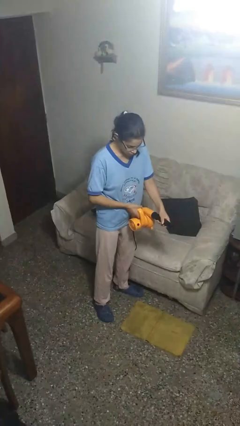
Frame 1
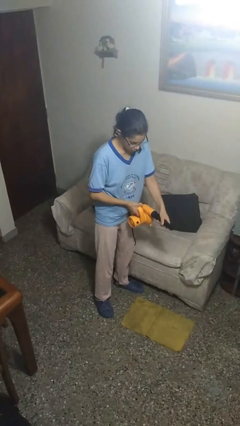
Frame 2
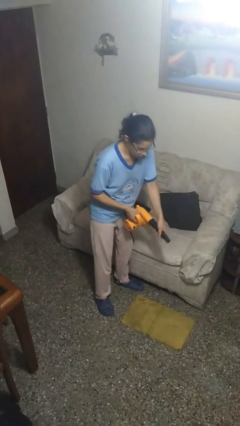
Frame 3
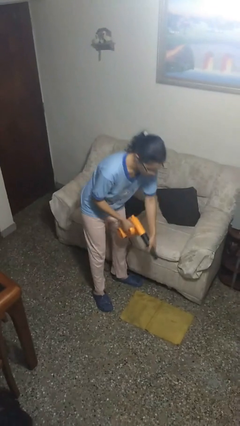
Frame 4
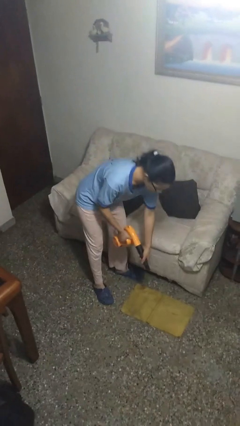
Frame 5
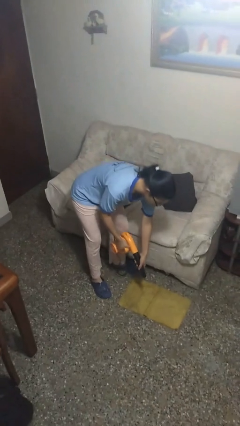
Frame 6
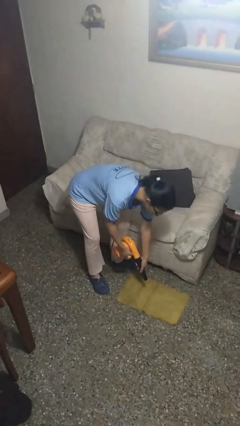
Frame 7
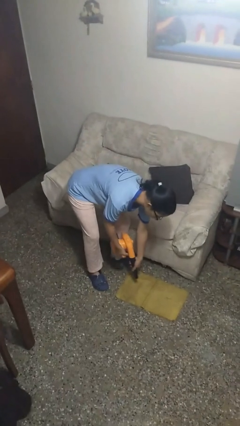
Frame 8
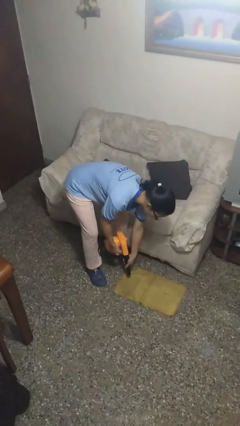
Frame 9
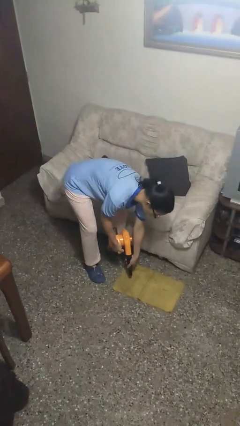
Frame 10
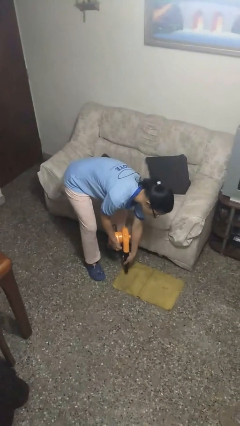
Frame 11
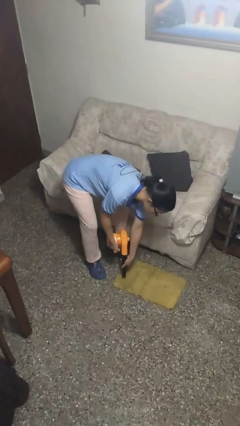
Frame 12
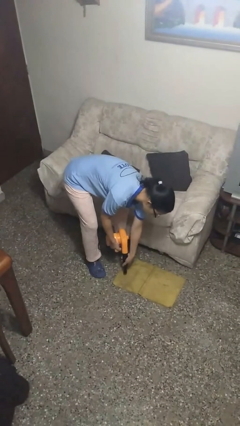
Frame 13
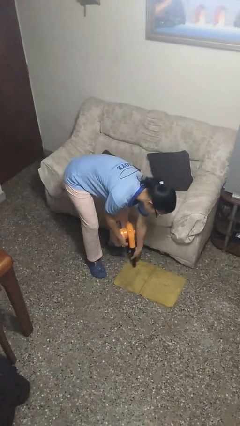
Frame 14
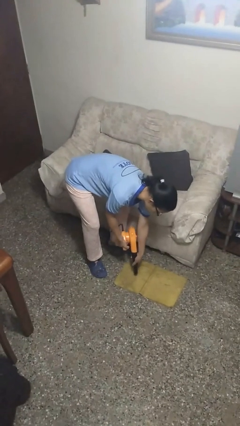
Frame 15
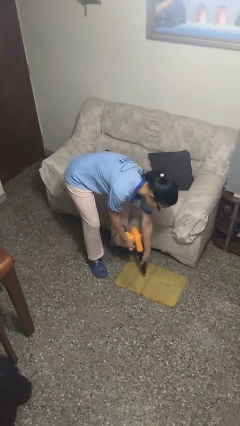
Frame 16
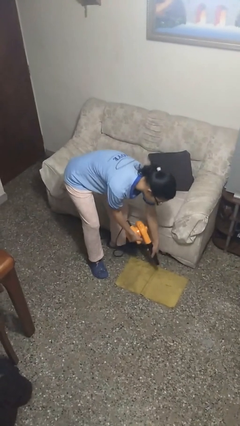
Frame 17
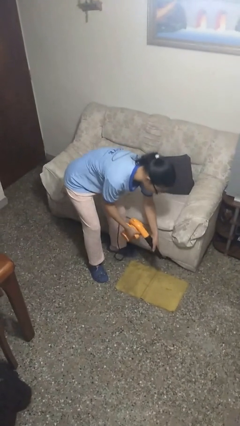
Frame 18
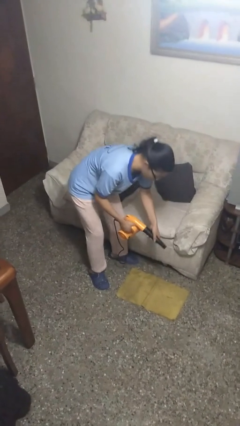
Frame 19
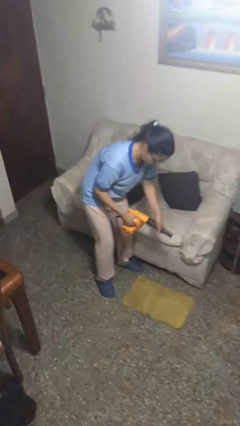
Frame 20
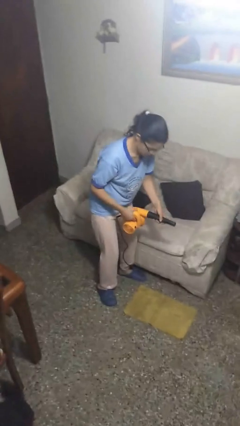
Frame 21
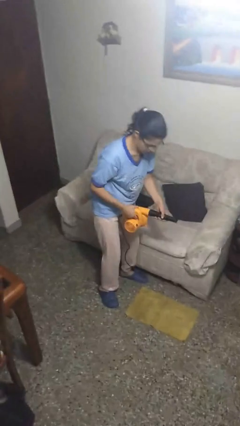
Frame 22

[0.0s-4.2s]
person vacuums carpet

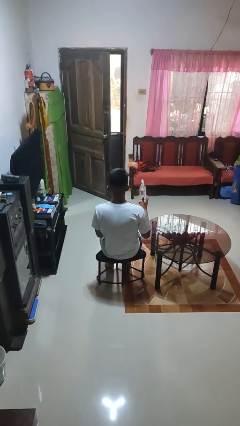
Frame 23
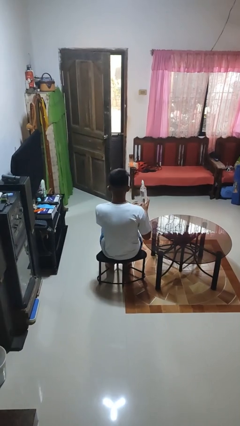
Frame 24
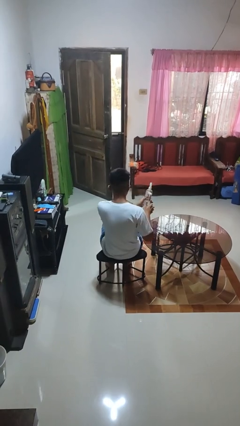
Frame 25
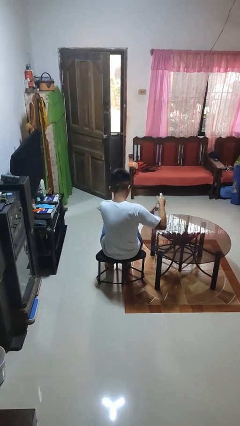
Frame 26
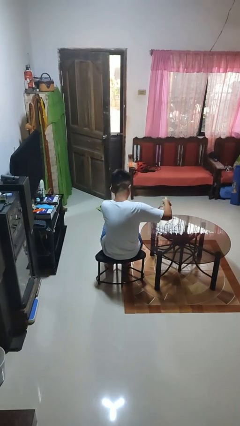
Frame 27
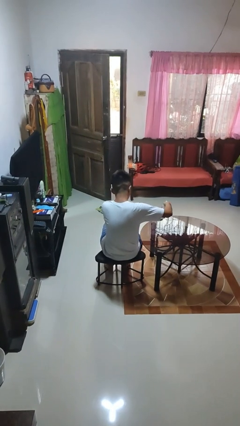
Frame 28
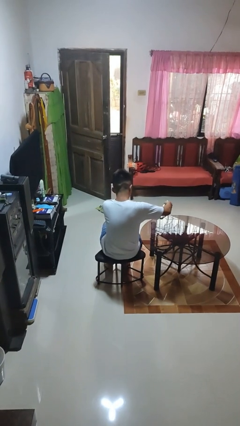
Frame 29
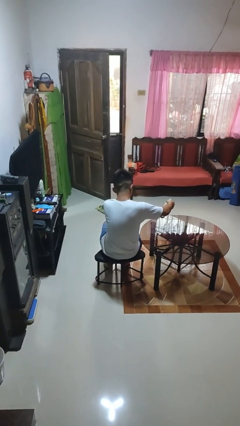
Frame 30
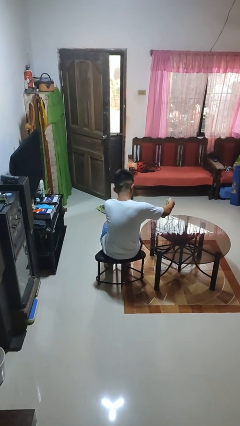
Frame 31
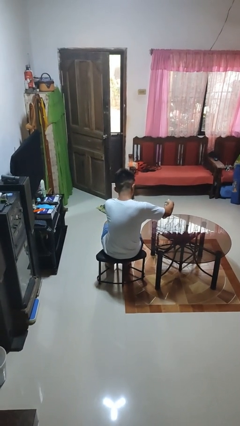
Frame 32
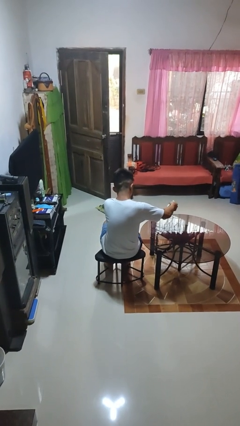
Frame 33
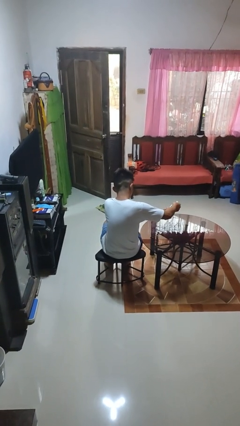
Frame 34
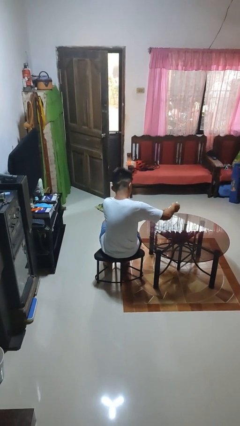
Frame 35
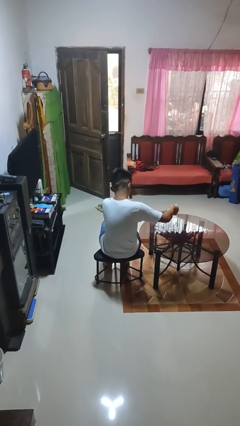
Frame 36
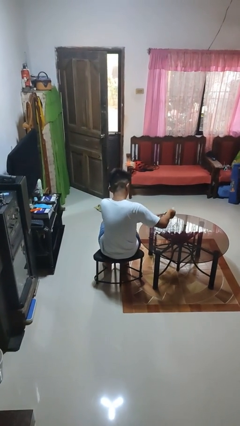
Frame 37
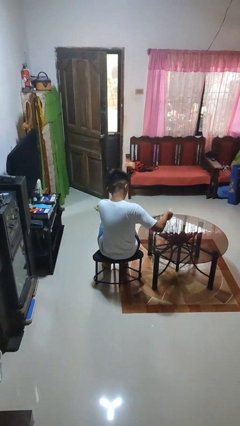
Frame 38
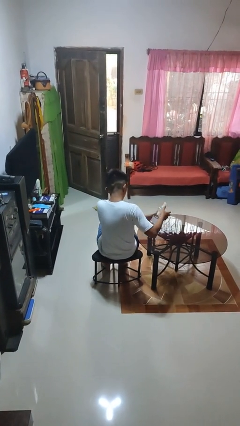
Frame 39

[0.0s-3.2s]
person sprays from bottle

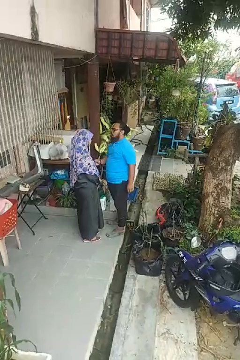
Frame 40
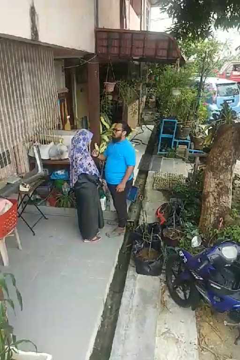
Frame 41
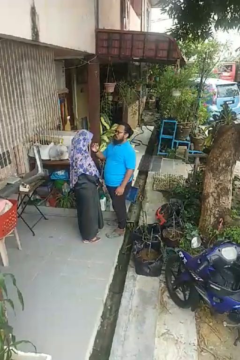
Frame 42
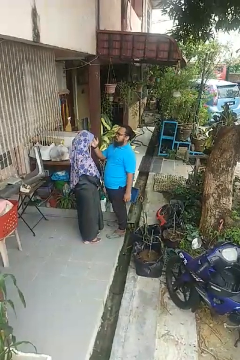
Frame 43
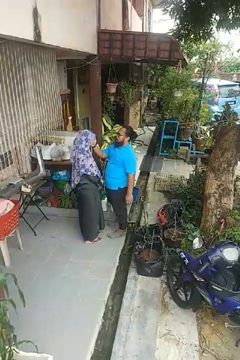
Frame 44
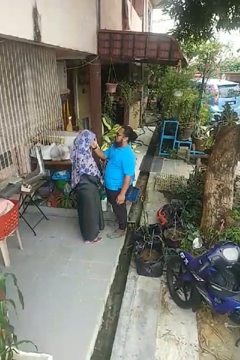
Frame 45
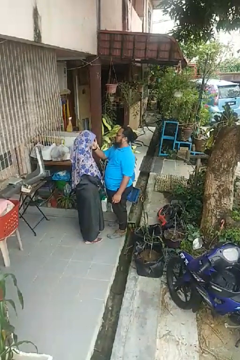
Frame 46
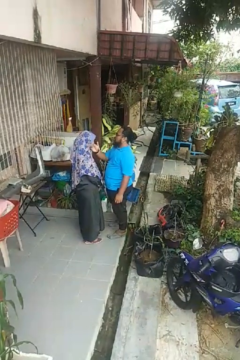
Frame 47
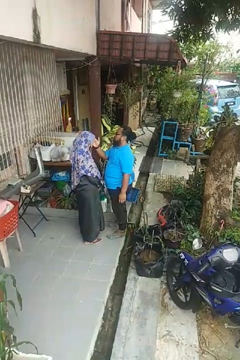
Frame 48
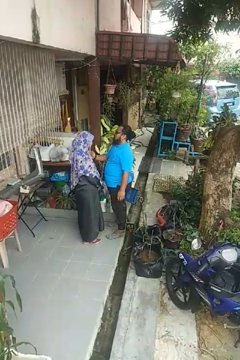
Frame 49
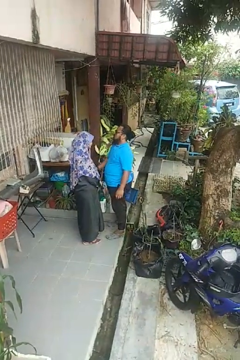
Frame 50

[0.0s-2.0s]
person touches face of person

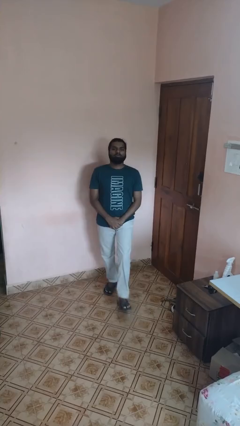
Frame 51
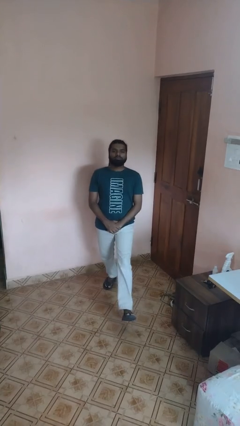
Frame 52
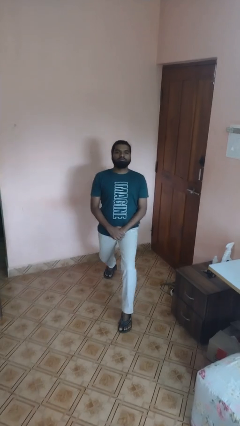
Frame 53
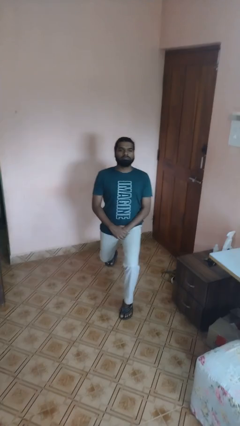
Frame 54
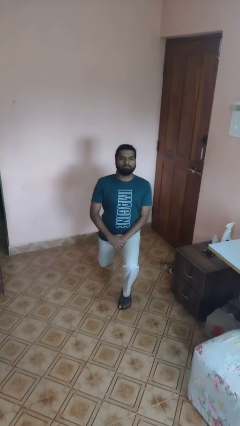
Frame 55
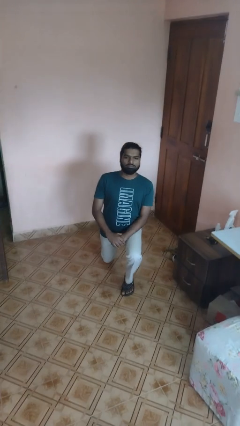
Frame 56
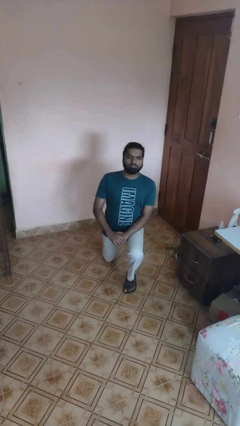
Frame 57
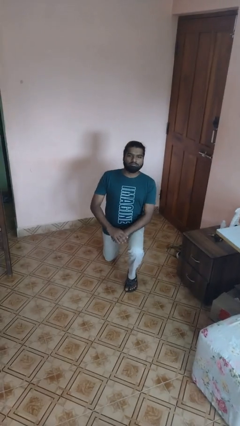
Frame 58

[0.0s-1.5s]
person kneels

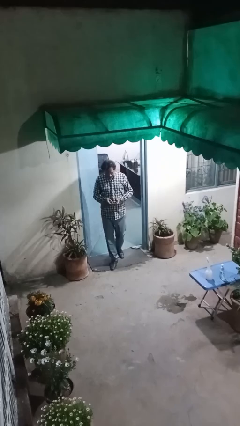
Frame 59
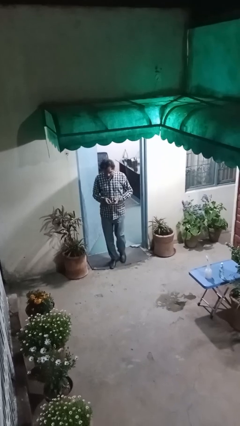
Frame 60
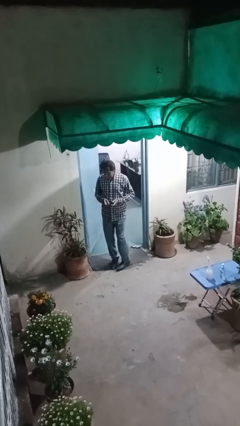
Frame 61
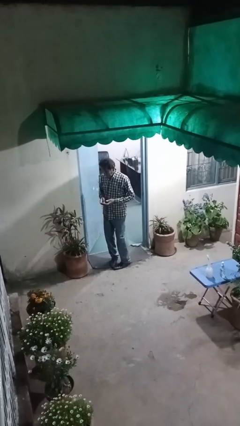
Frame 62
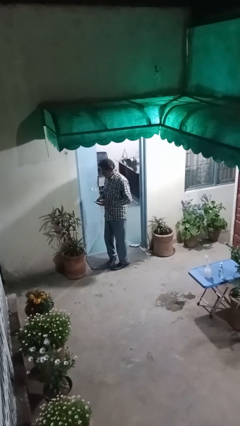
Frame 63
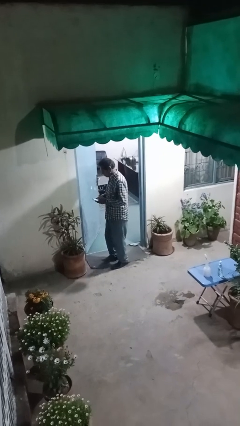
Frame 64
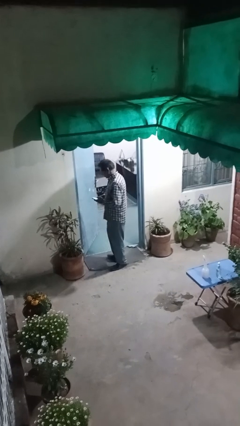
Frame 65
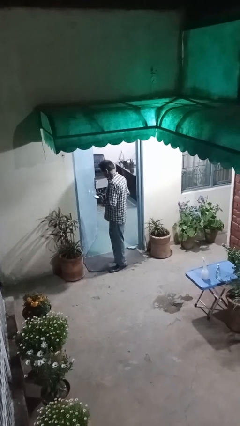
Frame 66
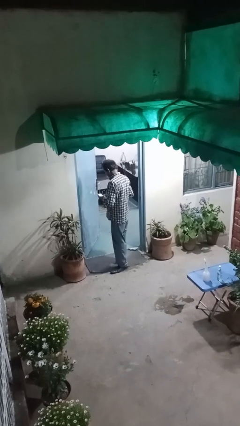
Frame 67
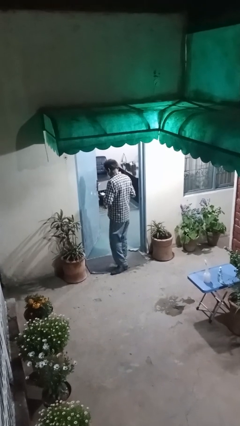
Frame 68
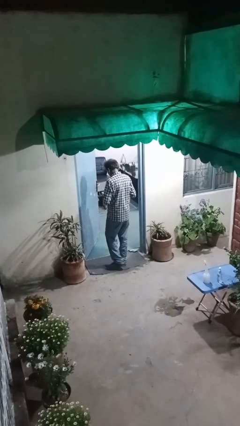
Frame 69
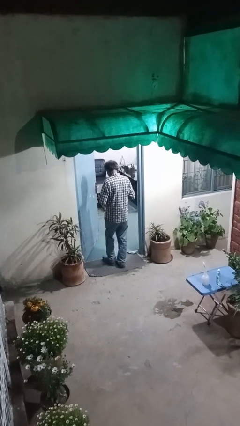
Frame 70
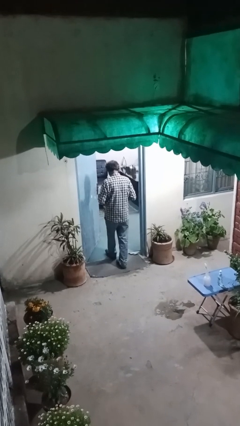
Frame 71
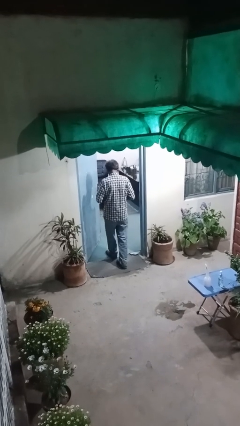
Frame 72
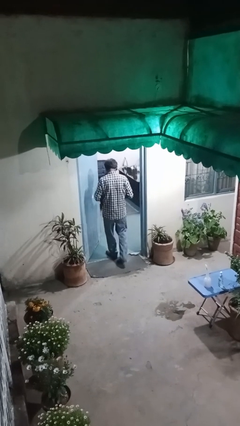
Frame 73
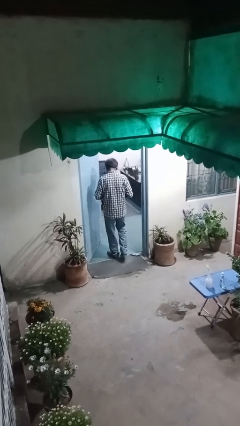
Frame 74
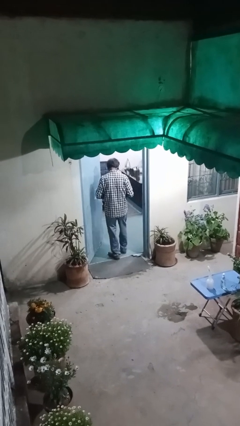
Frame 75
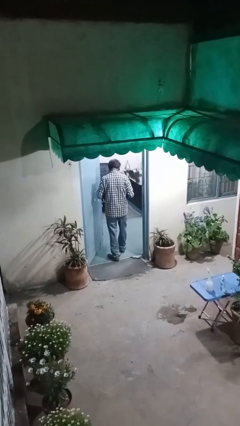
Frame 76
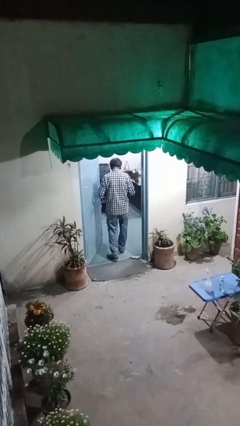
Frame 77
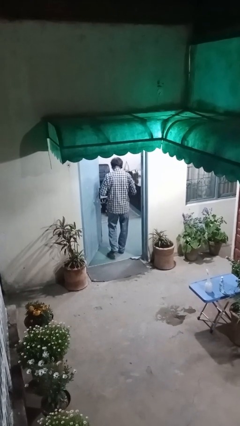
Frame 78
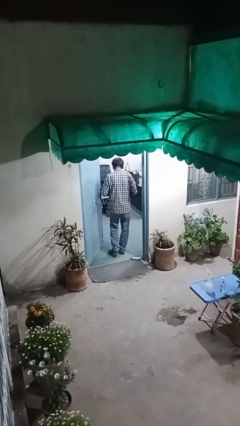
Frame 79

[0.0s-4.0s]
person exits scene through structure

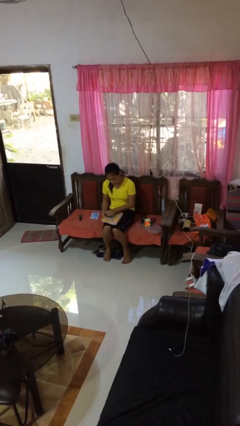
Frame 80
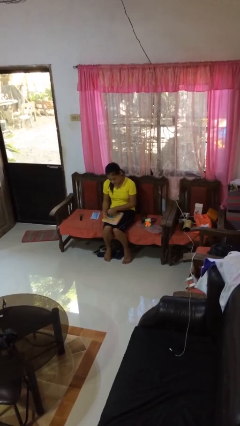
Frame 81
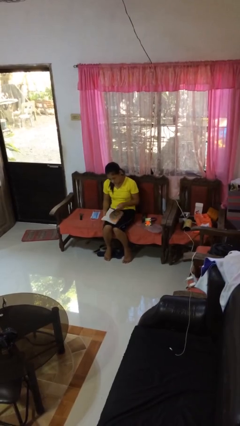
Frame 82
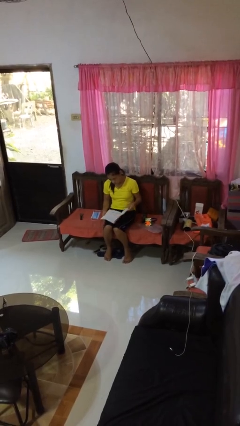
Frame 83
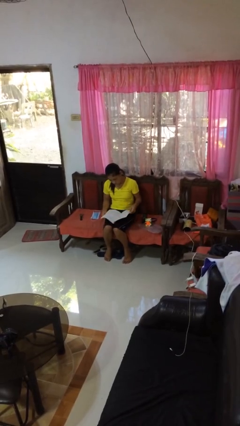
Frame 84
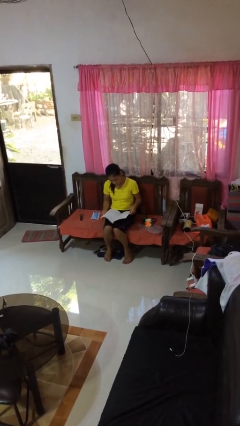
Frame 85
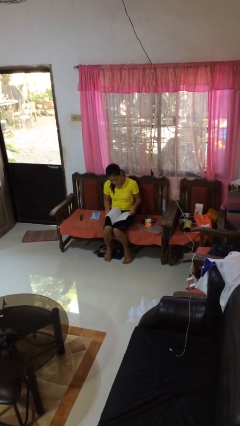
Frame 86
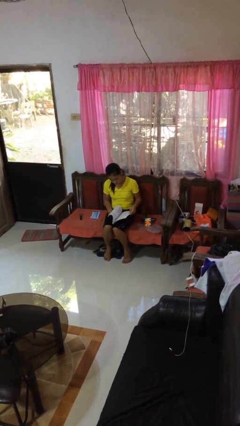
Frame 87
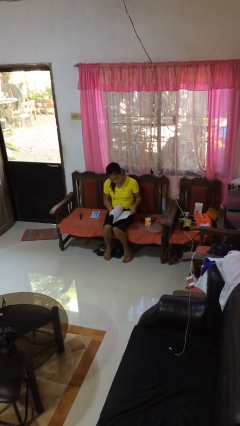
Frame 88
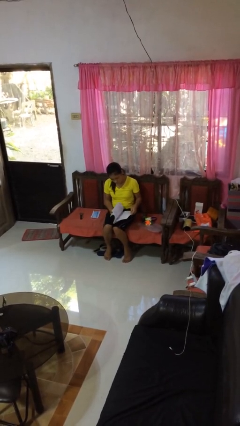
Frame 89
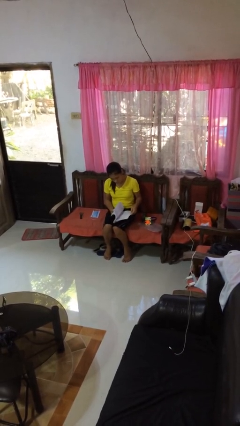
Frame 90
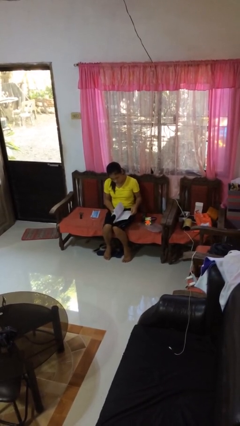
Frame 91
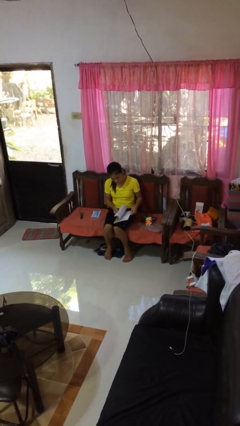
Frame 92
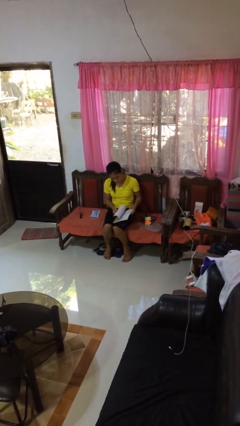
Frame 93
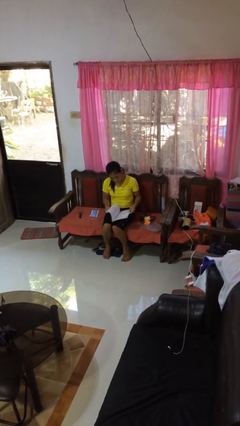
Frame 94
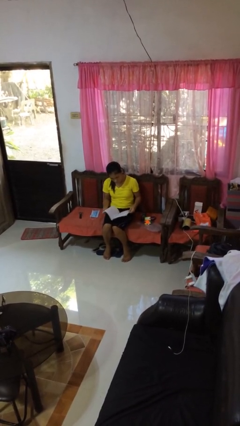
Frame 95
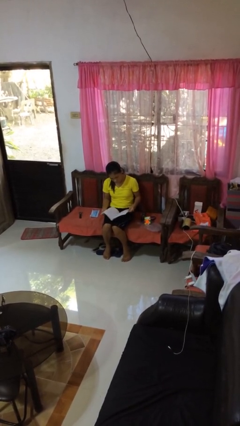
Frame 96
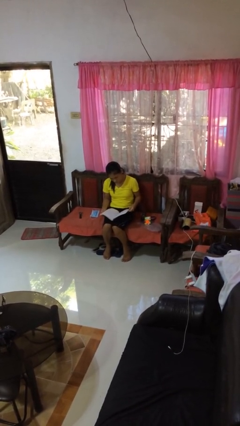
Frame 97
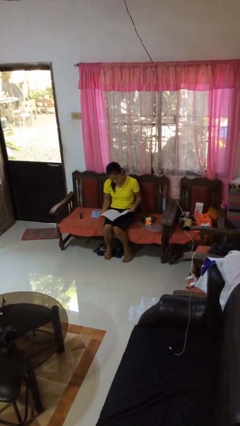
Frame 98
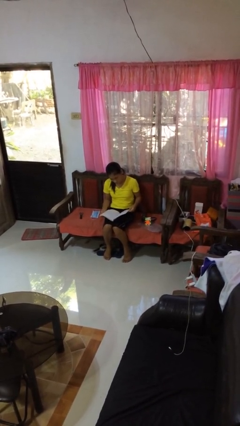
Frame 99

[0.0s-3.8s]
person reads book
